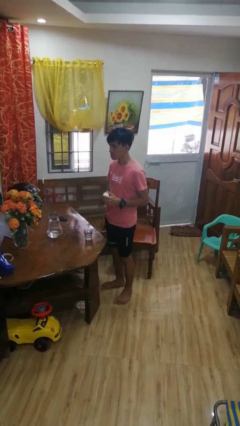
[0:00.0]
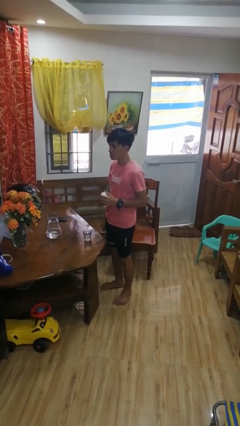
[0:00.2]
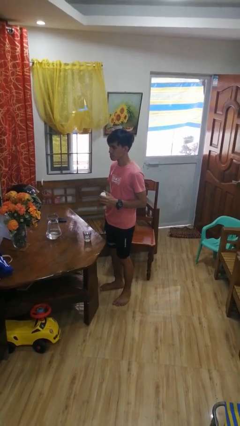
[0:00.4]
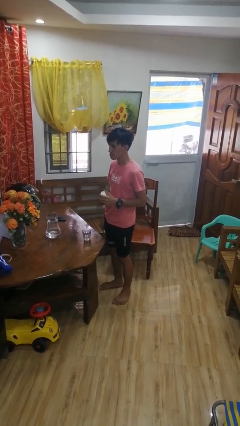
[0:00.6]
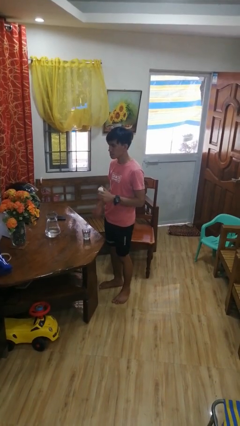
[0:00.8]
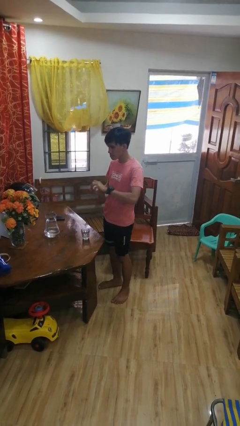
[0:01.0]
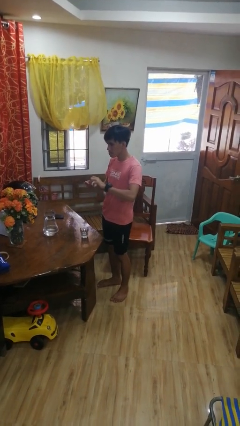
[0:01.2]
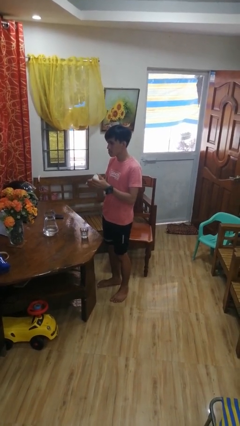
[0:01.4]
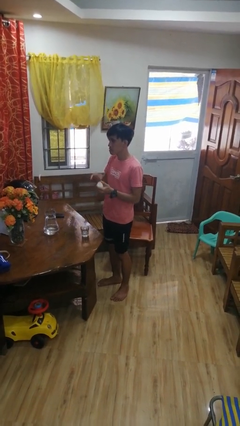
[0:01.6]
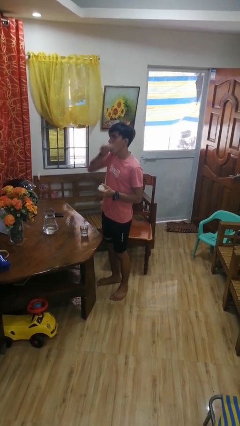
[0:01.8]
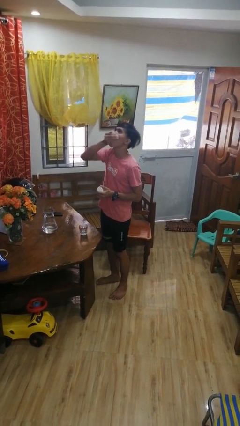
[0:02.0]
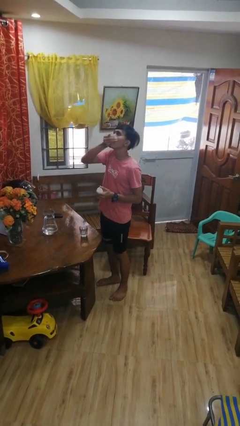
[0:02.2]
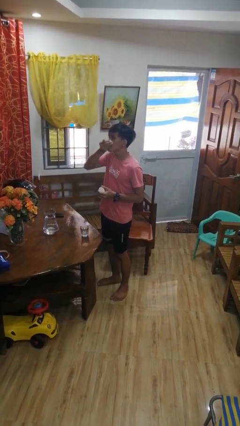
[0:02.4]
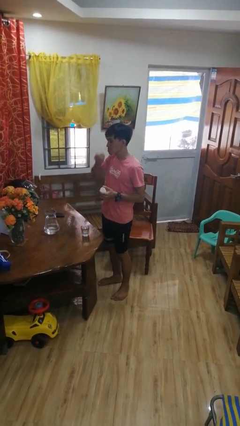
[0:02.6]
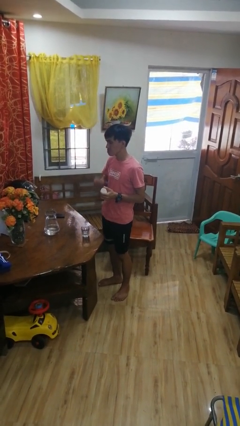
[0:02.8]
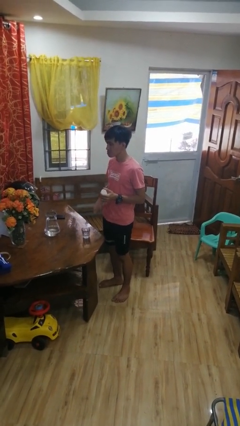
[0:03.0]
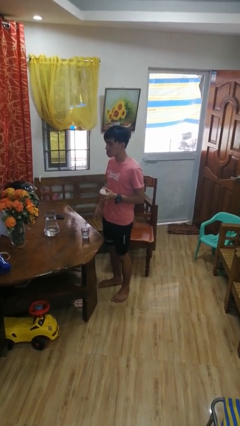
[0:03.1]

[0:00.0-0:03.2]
person takes medicine pills

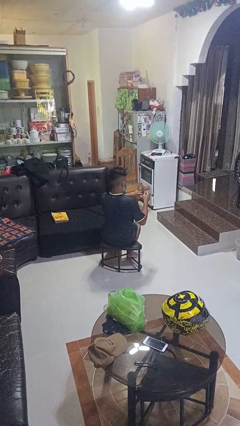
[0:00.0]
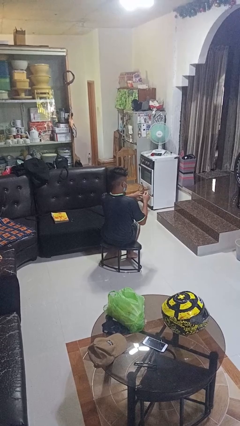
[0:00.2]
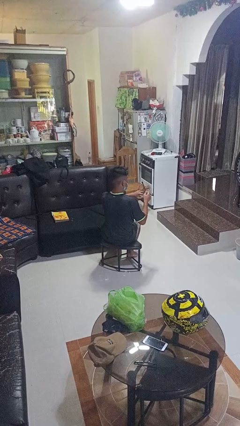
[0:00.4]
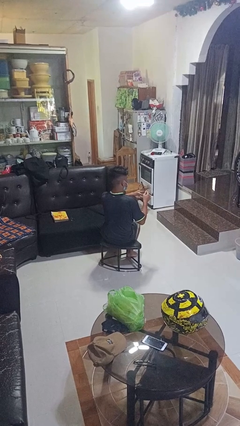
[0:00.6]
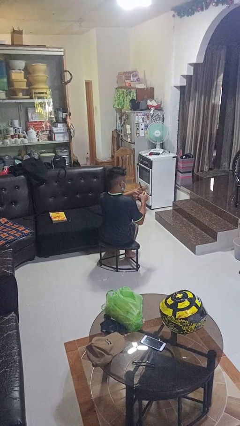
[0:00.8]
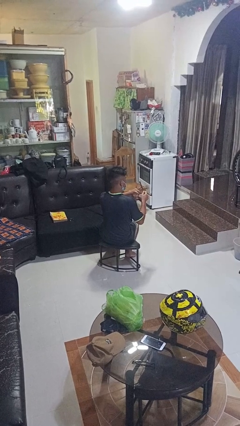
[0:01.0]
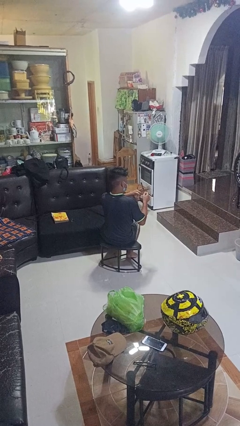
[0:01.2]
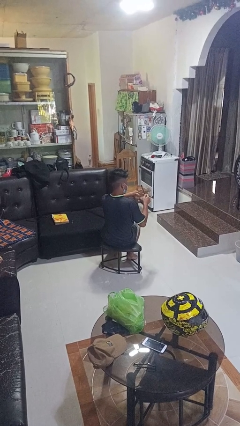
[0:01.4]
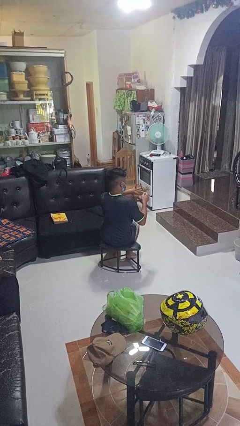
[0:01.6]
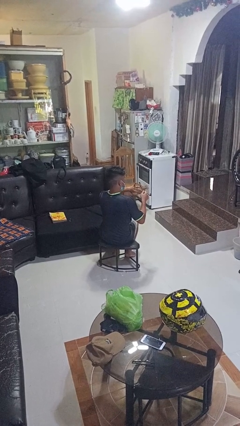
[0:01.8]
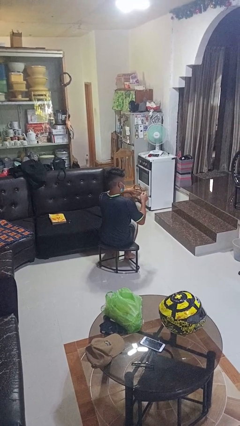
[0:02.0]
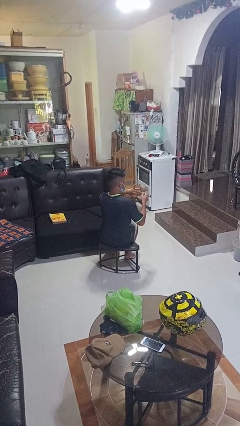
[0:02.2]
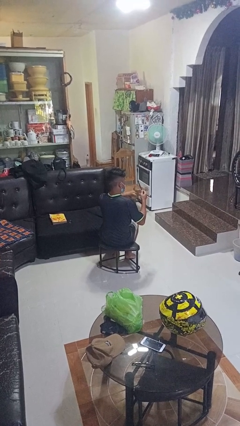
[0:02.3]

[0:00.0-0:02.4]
person files fingernails

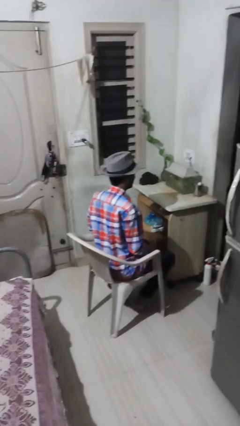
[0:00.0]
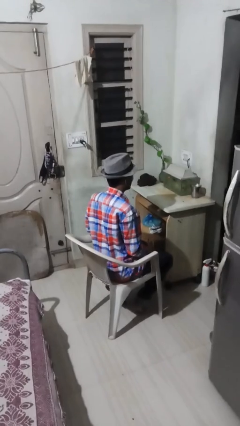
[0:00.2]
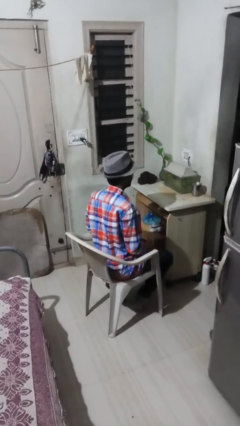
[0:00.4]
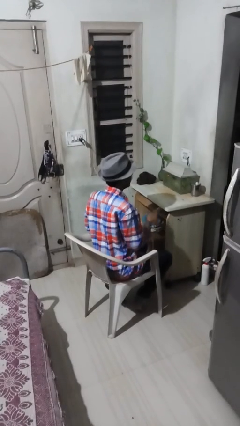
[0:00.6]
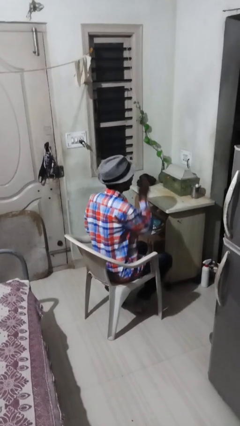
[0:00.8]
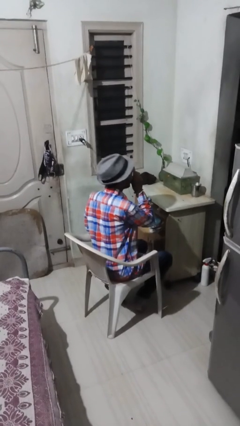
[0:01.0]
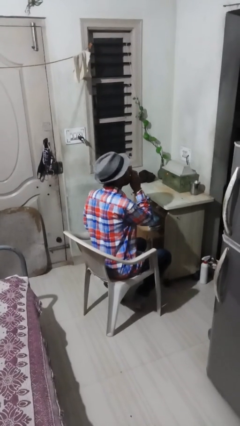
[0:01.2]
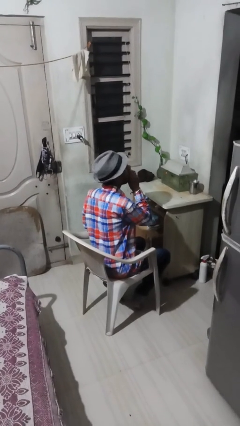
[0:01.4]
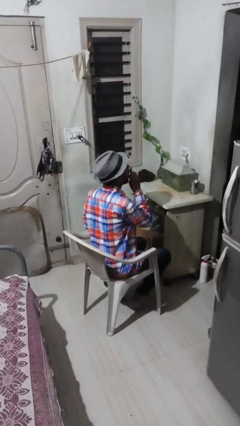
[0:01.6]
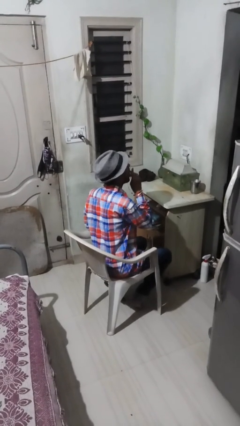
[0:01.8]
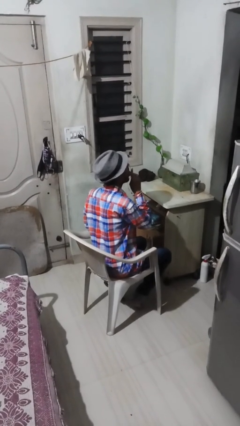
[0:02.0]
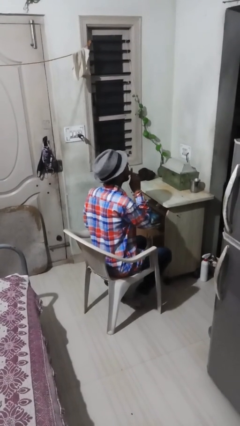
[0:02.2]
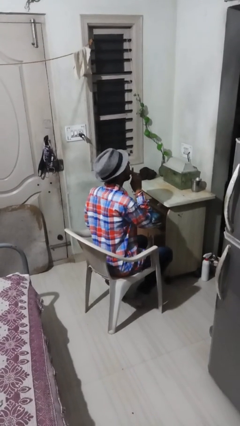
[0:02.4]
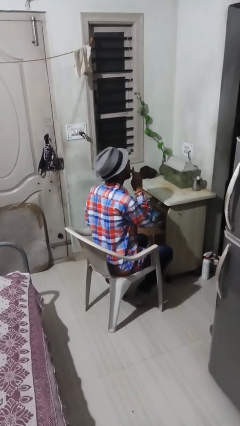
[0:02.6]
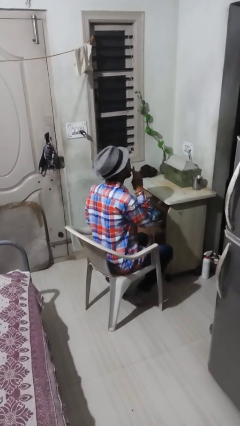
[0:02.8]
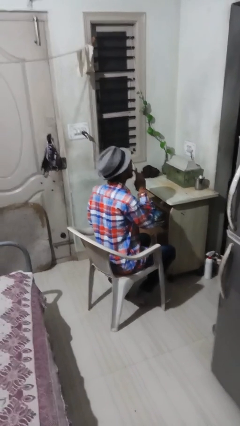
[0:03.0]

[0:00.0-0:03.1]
person licks fingers

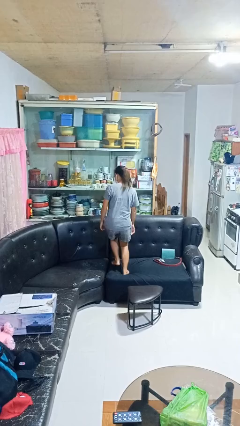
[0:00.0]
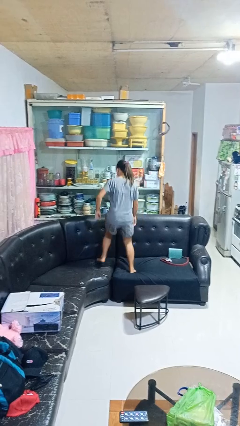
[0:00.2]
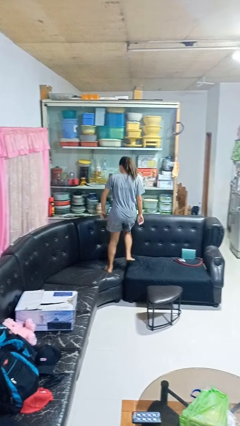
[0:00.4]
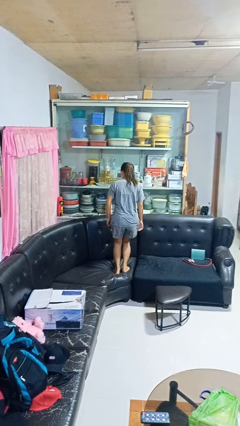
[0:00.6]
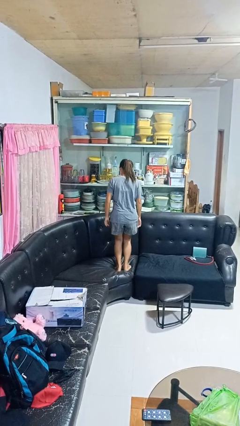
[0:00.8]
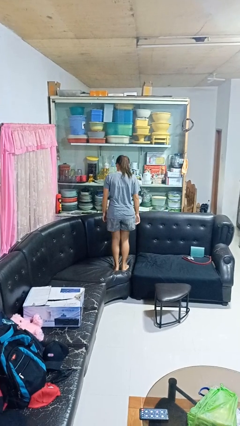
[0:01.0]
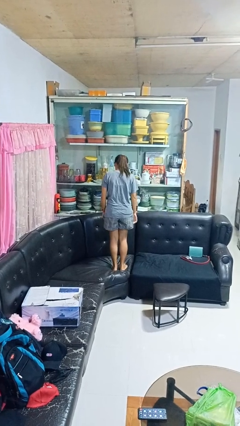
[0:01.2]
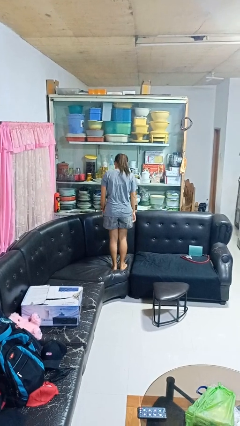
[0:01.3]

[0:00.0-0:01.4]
person jumps on couch

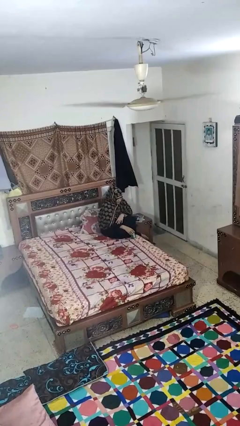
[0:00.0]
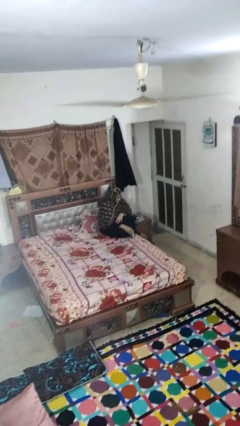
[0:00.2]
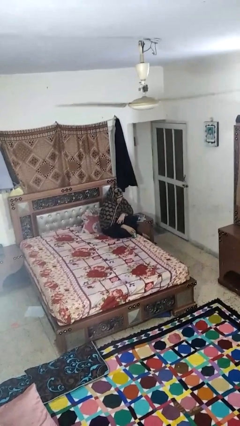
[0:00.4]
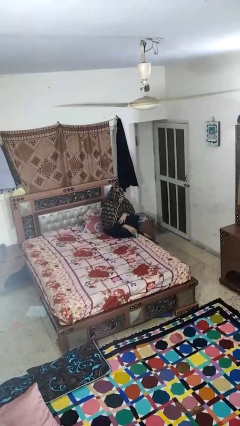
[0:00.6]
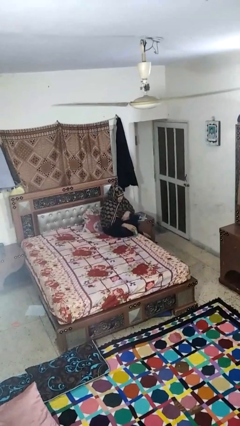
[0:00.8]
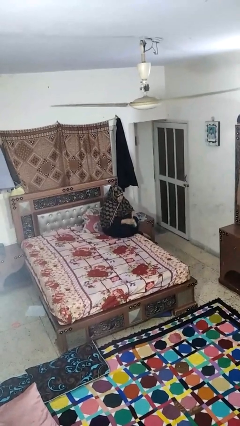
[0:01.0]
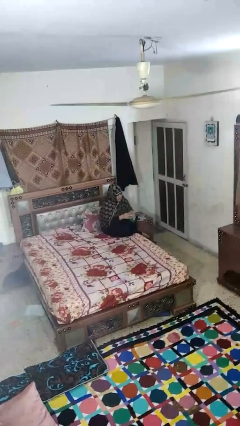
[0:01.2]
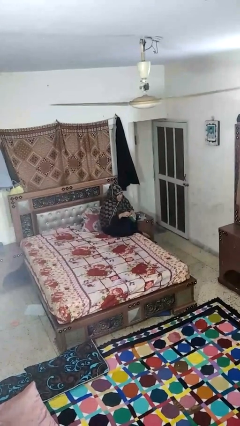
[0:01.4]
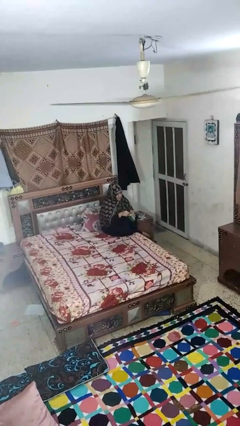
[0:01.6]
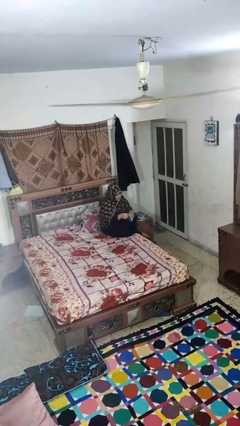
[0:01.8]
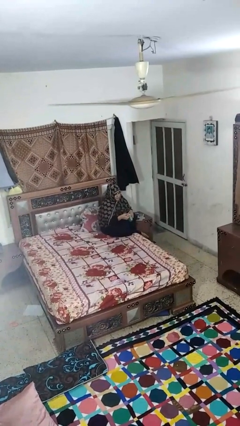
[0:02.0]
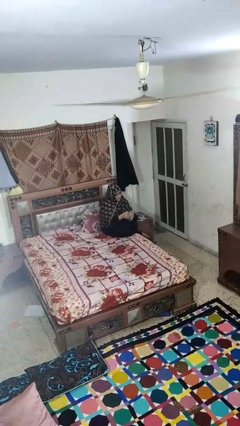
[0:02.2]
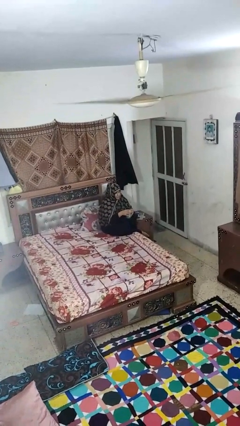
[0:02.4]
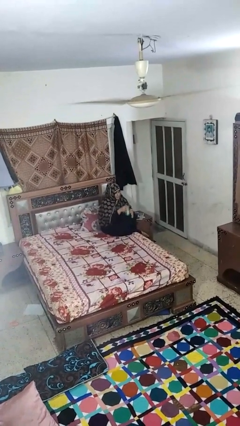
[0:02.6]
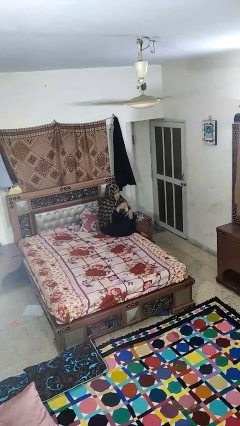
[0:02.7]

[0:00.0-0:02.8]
person opens beverage can

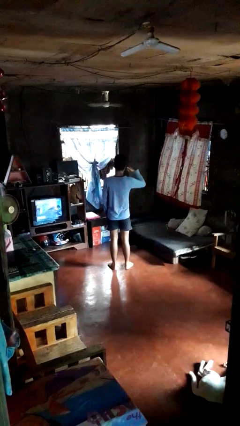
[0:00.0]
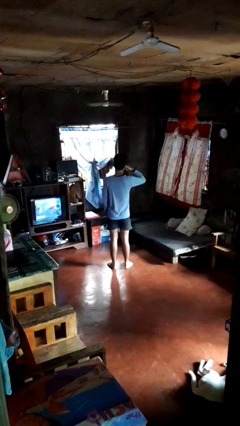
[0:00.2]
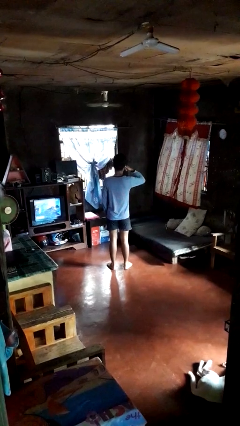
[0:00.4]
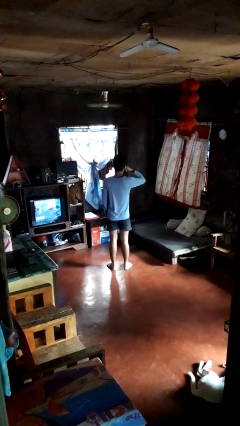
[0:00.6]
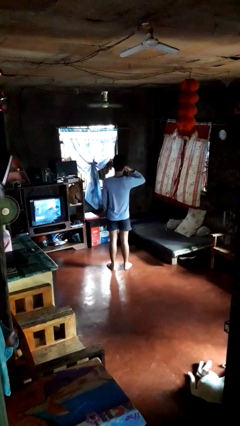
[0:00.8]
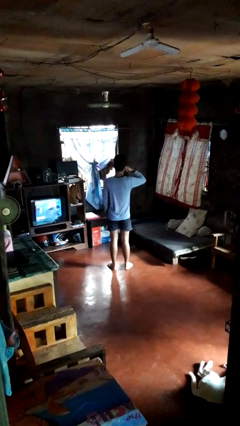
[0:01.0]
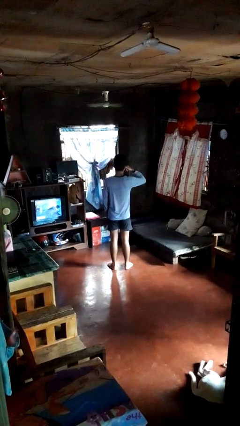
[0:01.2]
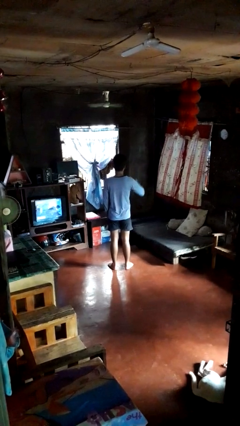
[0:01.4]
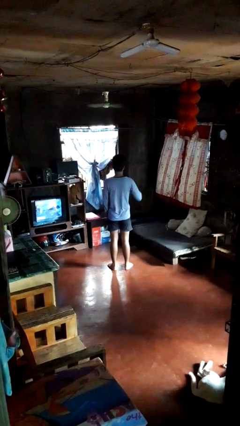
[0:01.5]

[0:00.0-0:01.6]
person gestures call me

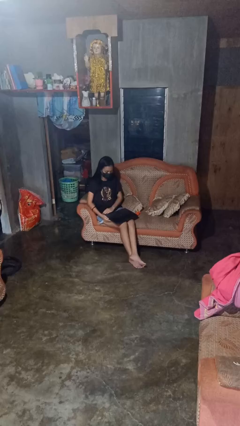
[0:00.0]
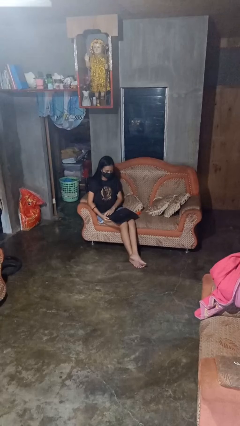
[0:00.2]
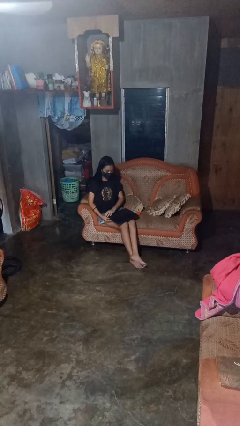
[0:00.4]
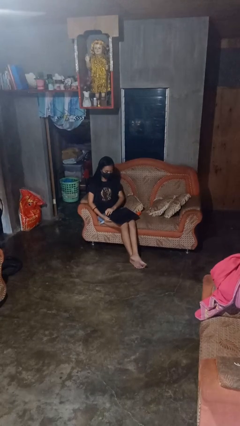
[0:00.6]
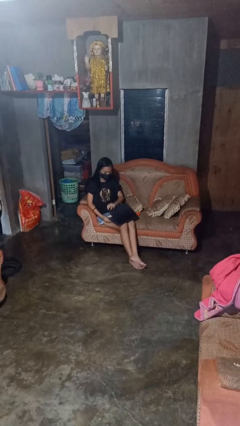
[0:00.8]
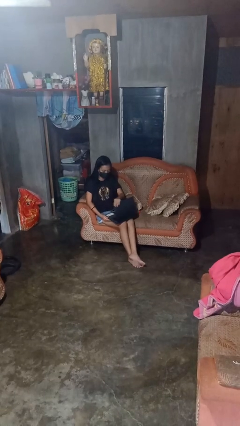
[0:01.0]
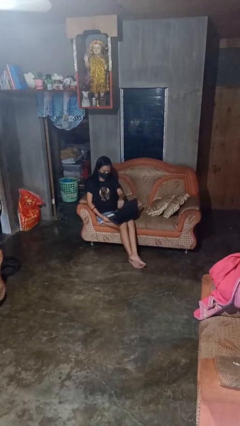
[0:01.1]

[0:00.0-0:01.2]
person opens laptop

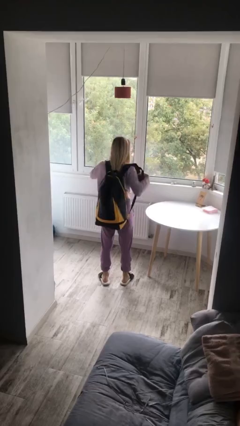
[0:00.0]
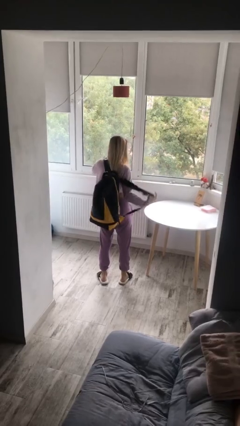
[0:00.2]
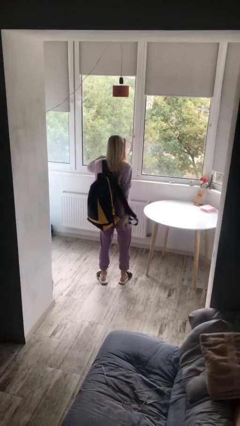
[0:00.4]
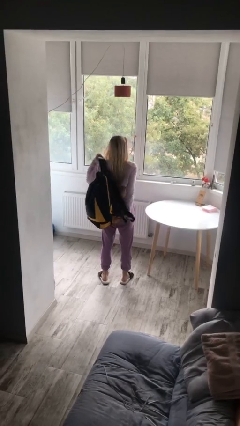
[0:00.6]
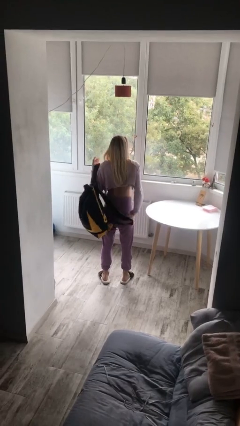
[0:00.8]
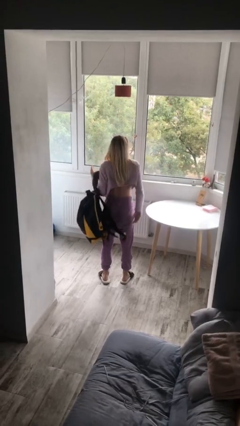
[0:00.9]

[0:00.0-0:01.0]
person takes off backpack

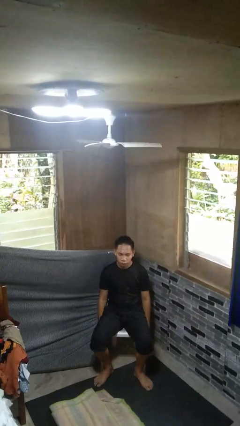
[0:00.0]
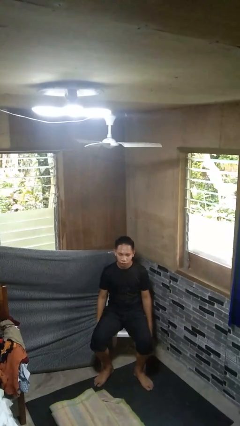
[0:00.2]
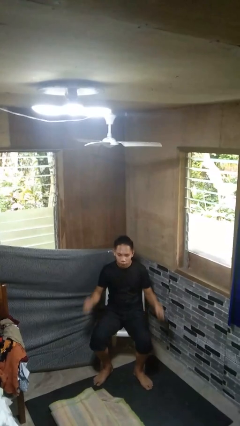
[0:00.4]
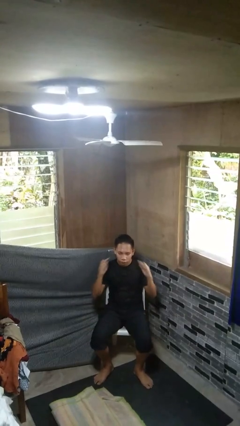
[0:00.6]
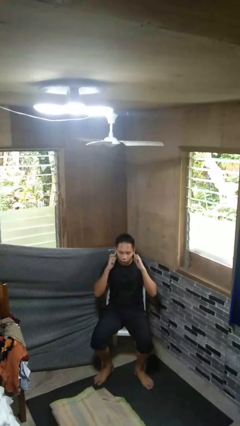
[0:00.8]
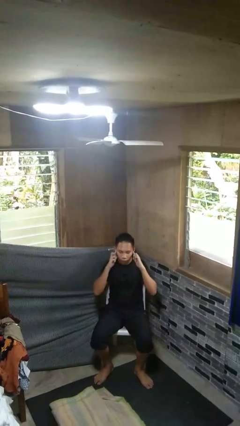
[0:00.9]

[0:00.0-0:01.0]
person puts fingers in ear
